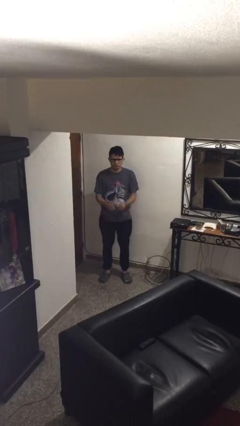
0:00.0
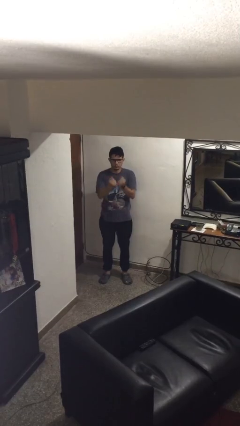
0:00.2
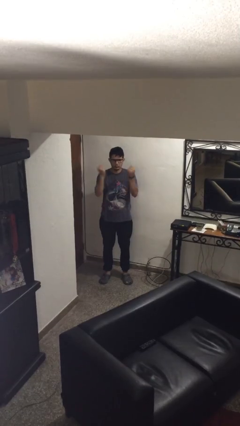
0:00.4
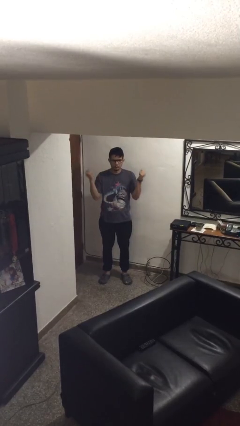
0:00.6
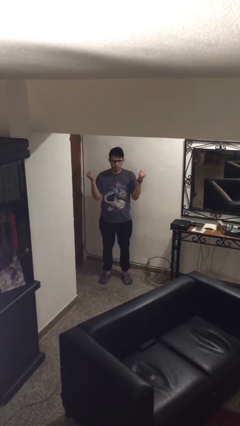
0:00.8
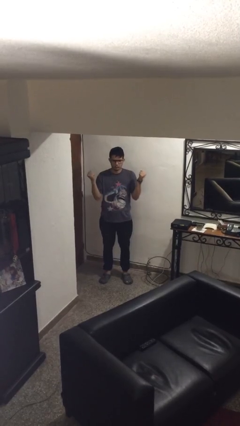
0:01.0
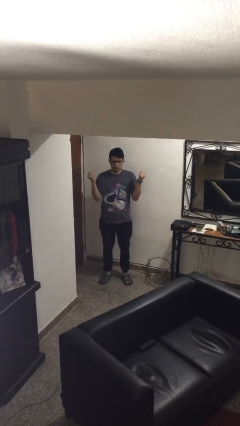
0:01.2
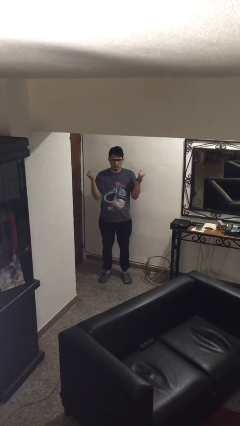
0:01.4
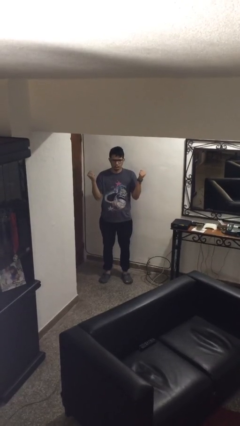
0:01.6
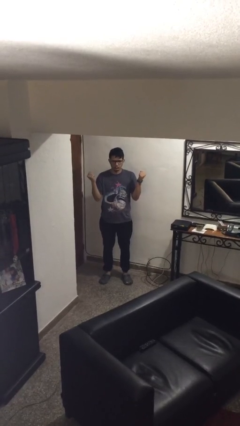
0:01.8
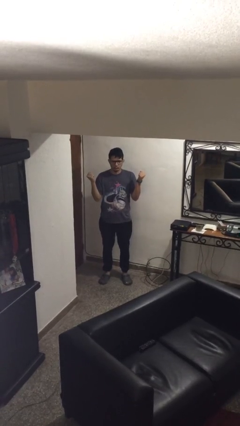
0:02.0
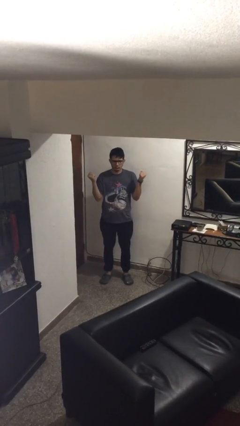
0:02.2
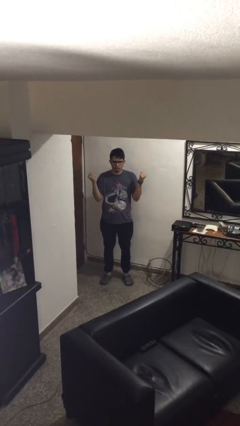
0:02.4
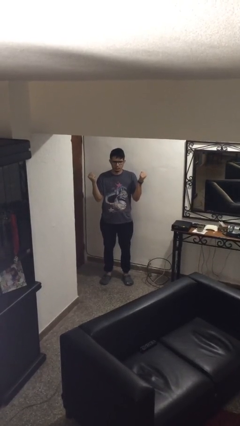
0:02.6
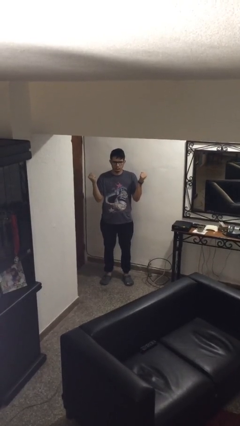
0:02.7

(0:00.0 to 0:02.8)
person gestures zoom in

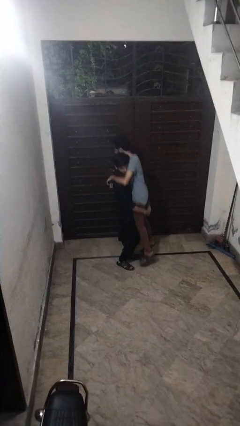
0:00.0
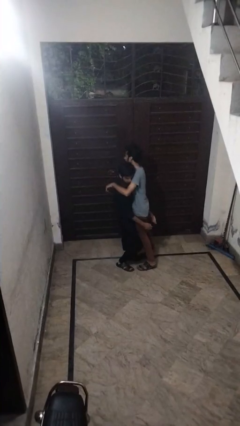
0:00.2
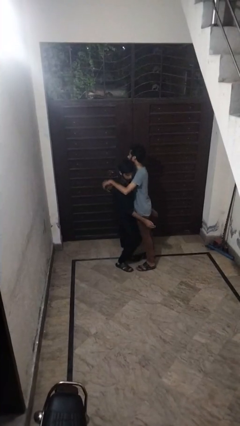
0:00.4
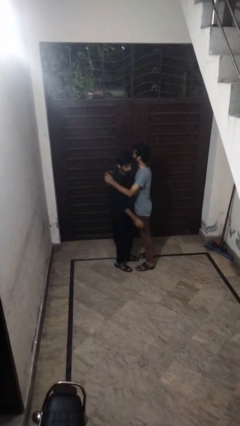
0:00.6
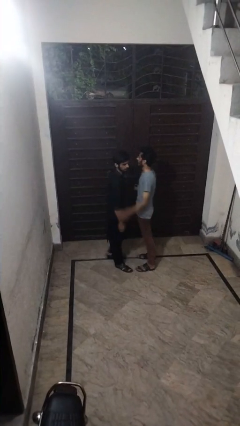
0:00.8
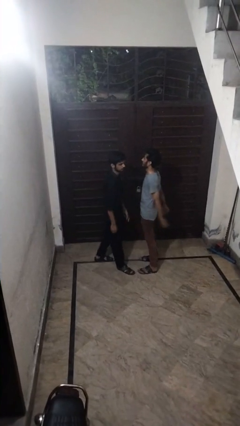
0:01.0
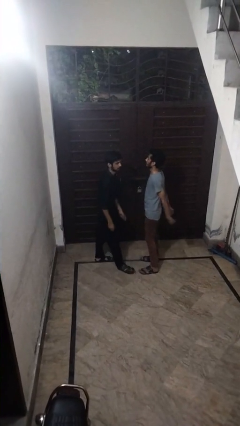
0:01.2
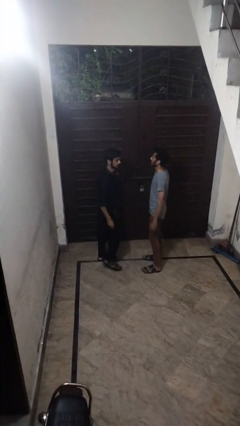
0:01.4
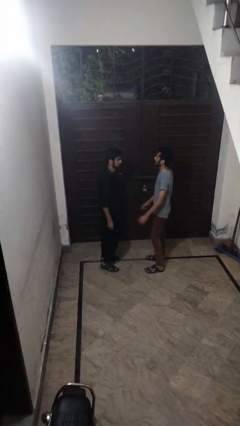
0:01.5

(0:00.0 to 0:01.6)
person puts down person

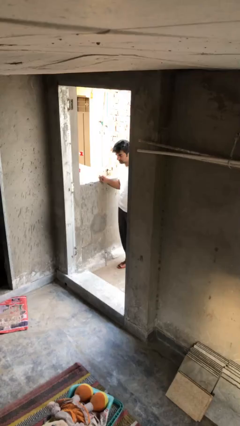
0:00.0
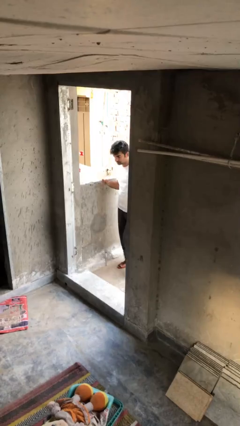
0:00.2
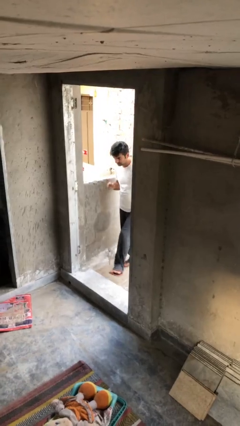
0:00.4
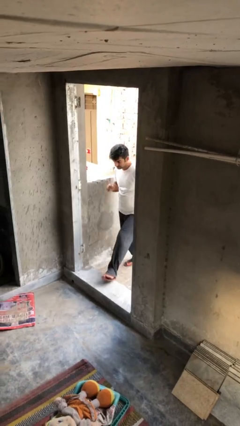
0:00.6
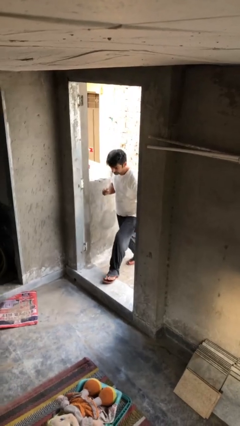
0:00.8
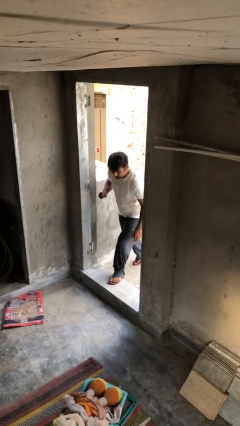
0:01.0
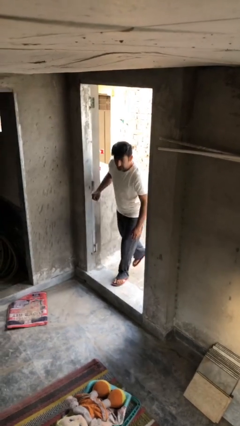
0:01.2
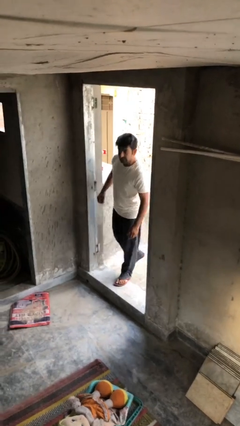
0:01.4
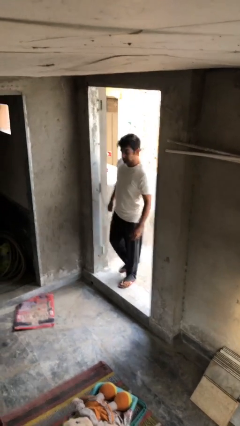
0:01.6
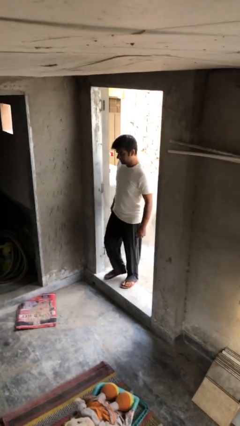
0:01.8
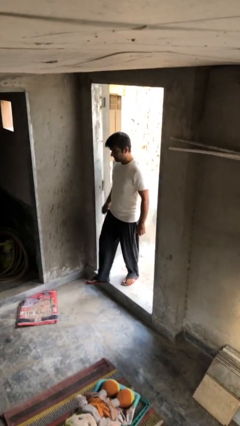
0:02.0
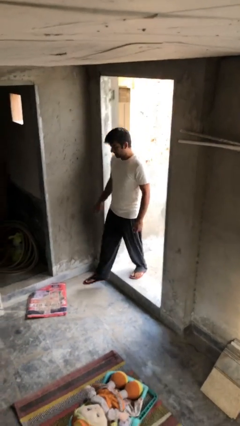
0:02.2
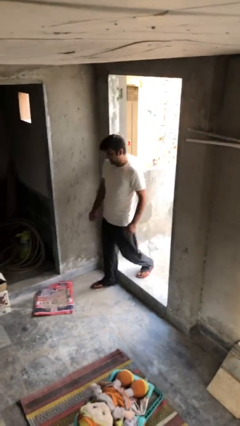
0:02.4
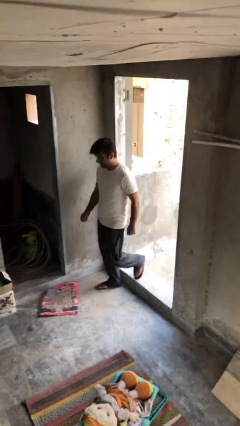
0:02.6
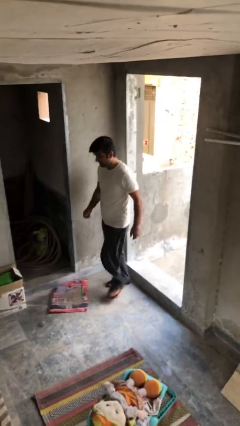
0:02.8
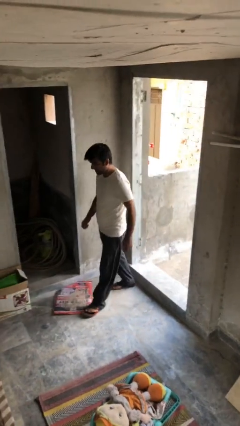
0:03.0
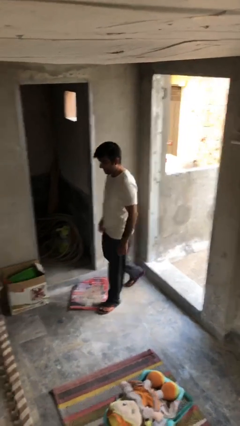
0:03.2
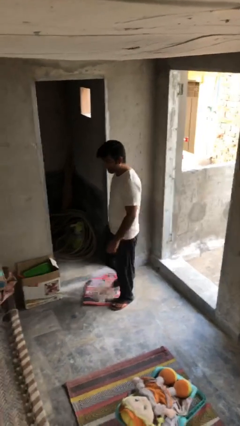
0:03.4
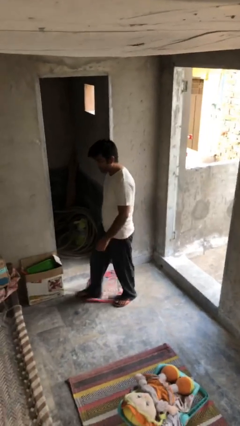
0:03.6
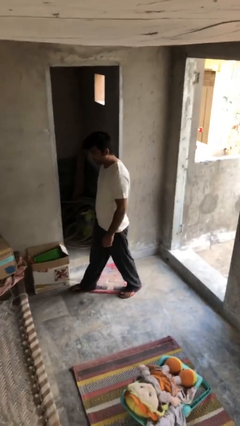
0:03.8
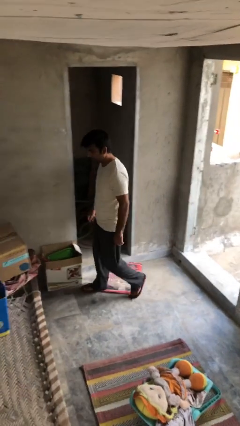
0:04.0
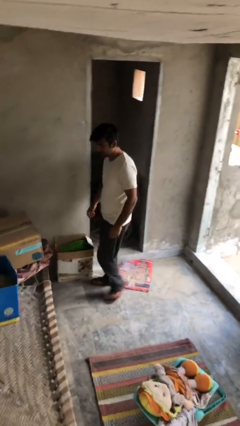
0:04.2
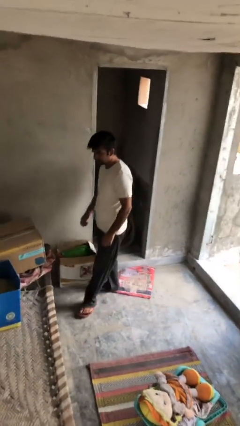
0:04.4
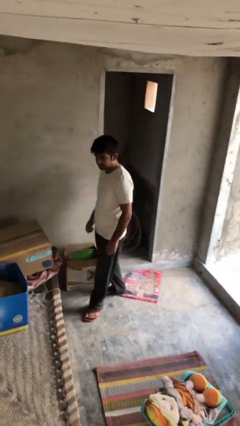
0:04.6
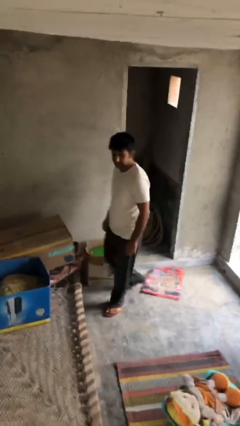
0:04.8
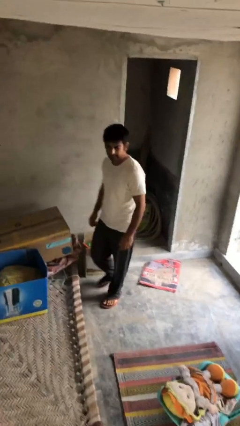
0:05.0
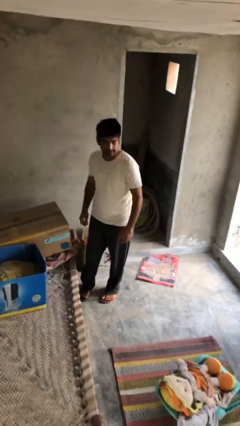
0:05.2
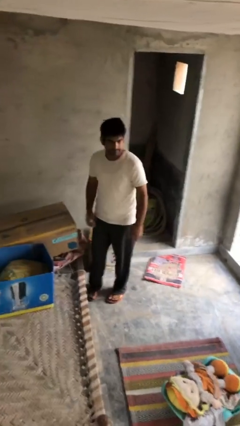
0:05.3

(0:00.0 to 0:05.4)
person enters scene through structure

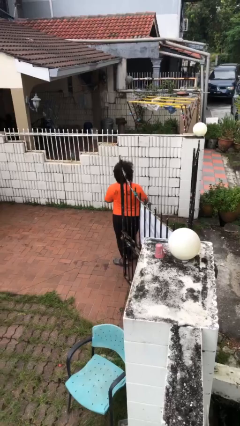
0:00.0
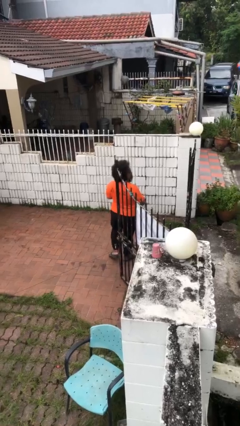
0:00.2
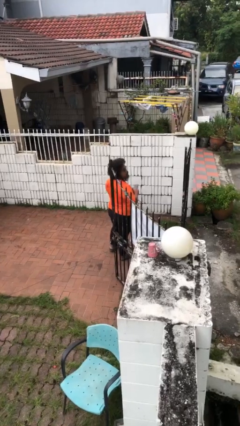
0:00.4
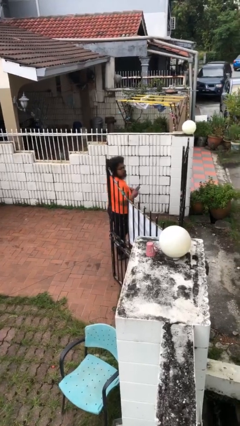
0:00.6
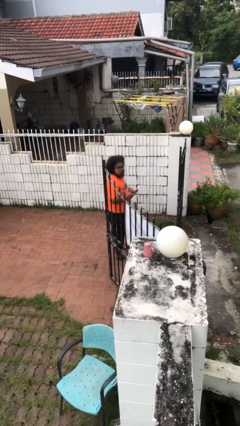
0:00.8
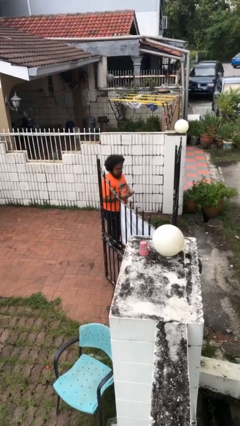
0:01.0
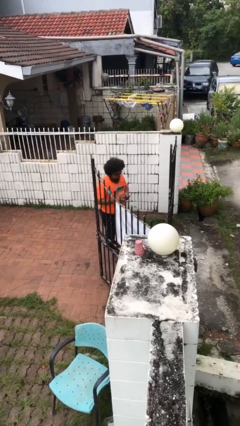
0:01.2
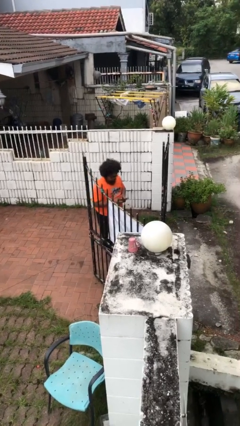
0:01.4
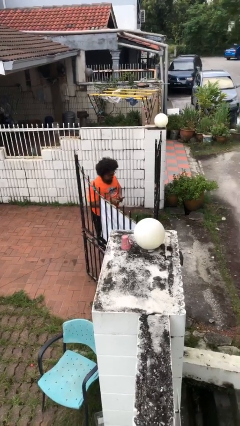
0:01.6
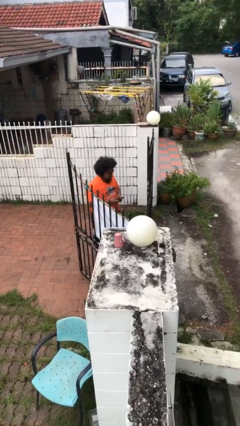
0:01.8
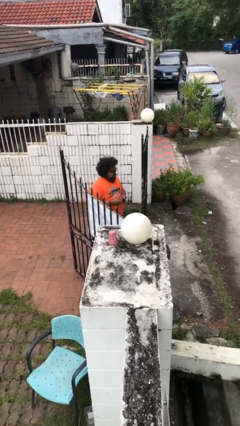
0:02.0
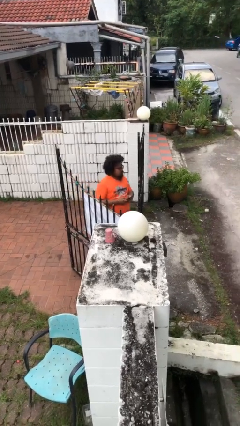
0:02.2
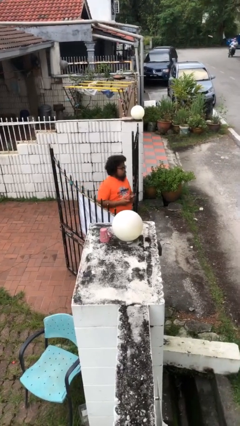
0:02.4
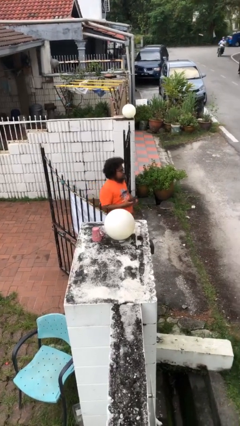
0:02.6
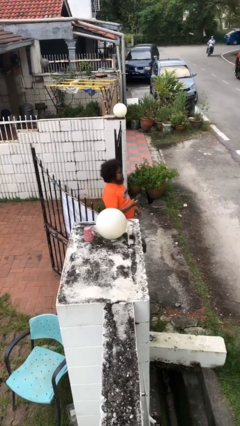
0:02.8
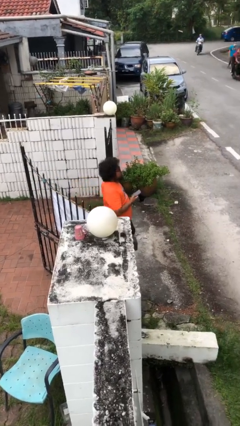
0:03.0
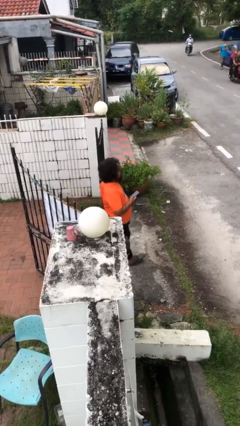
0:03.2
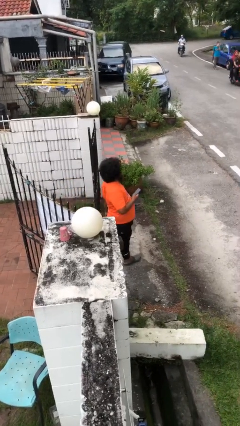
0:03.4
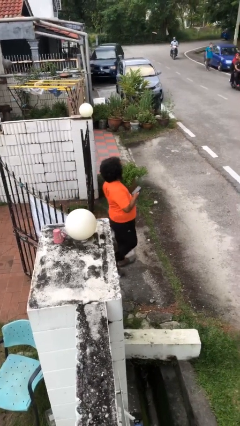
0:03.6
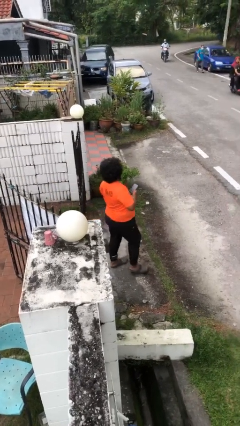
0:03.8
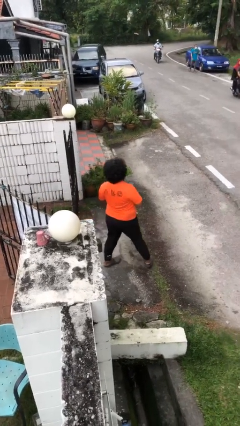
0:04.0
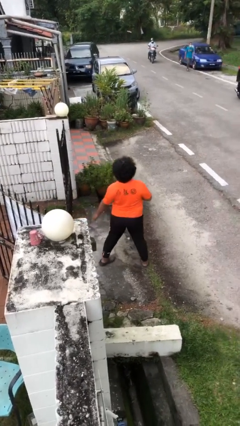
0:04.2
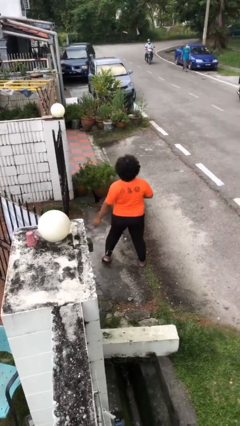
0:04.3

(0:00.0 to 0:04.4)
person exits scene through structure

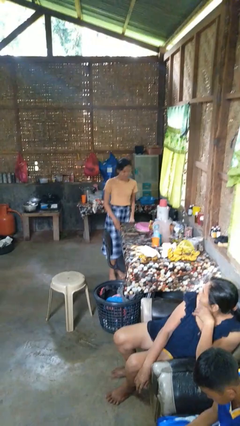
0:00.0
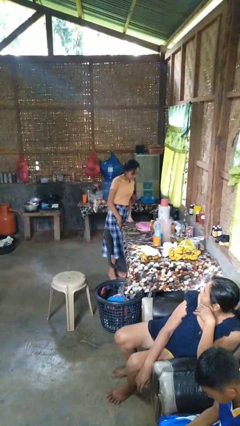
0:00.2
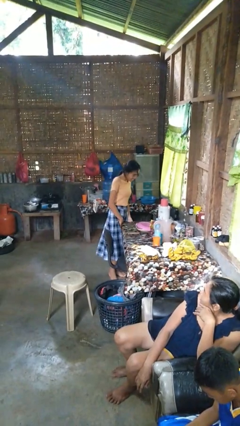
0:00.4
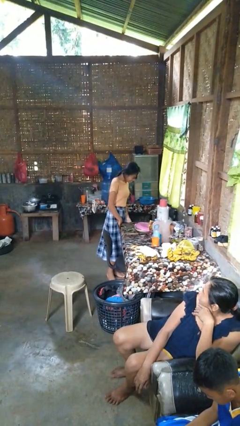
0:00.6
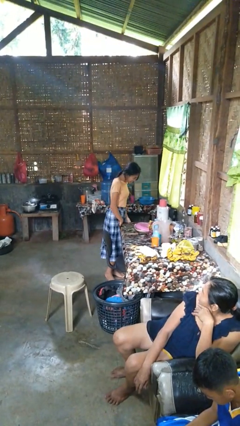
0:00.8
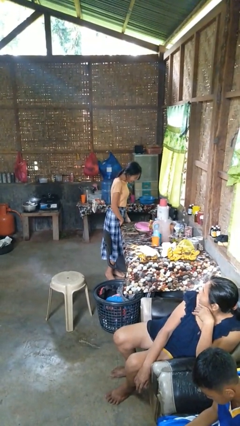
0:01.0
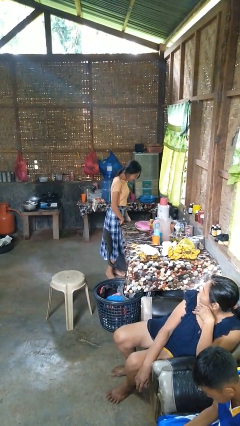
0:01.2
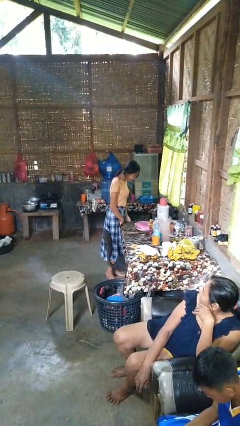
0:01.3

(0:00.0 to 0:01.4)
person bumps into table

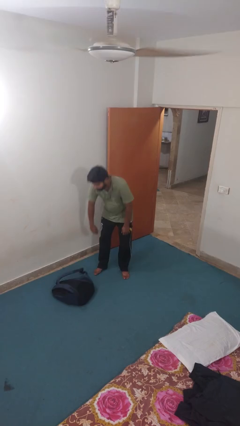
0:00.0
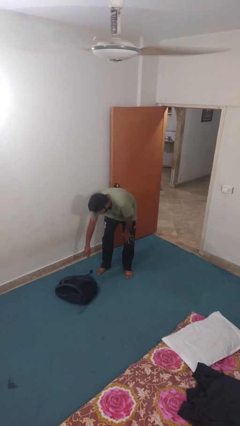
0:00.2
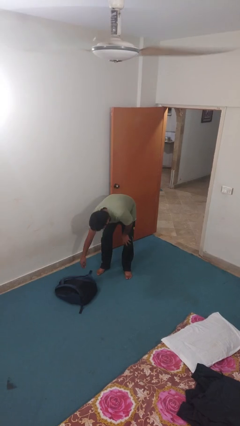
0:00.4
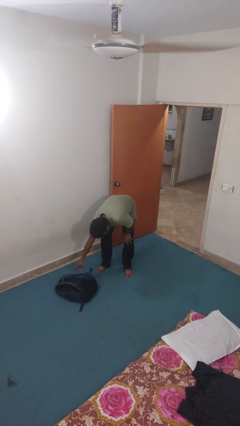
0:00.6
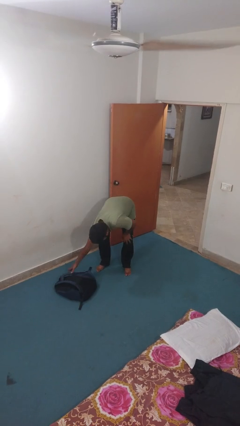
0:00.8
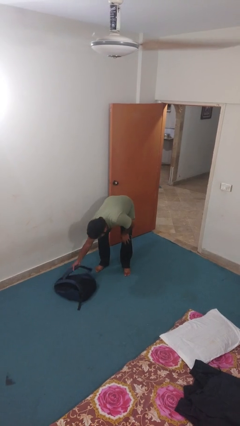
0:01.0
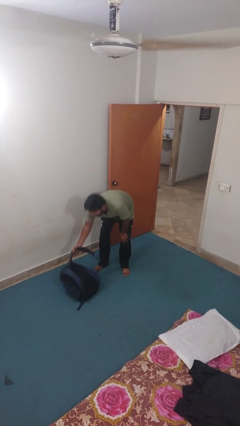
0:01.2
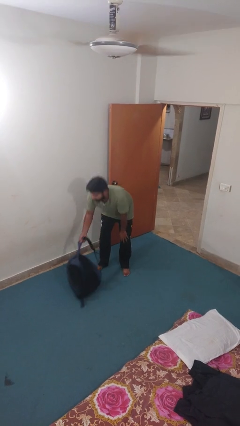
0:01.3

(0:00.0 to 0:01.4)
person picks up object from floor

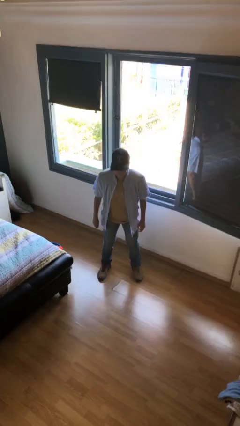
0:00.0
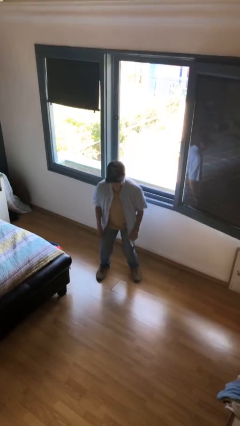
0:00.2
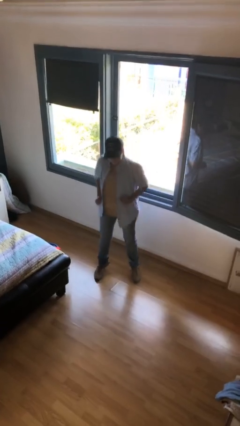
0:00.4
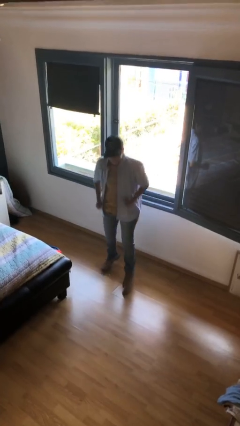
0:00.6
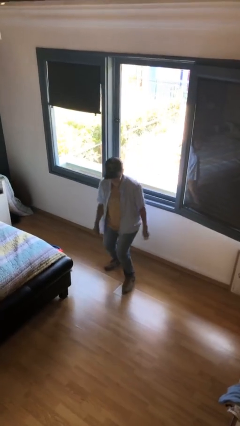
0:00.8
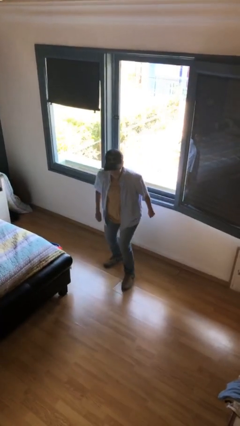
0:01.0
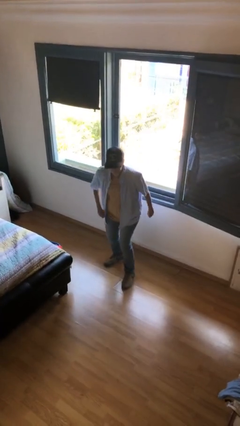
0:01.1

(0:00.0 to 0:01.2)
person jumps
